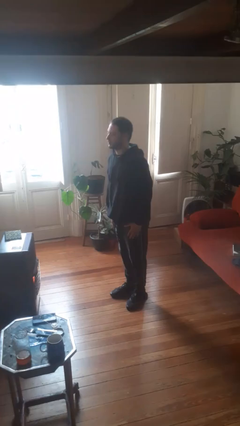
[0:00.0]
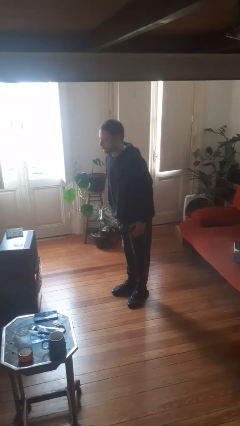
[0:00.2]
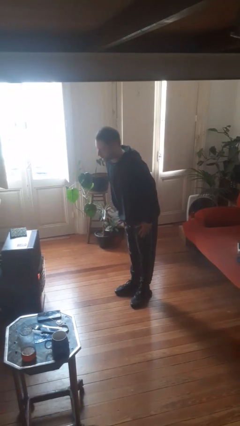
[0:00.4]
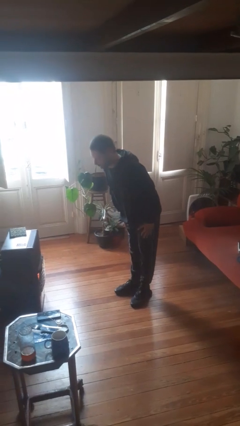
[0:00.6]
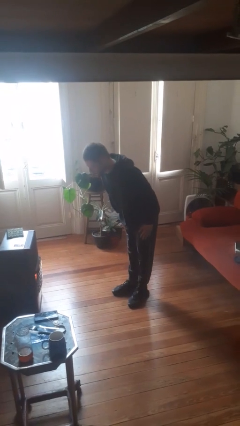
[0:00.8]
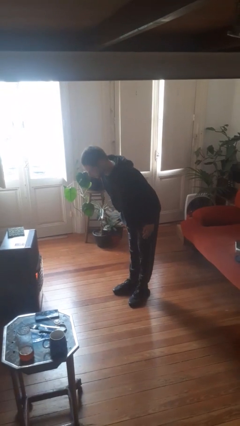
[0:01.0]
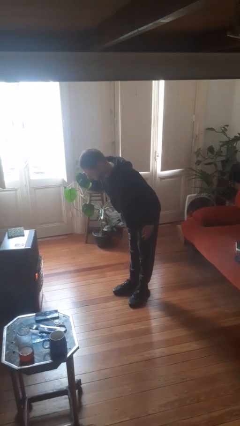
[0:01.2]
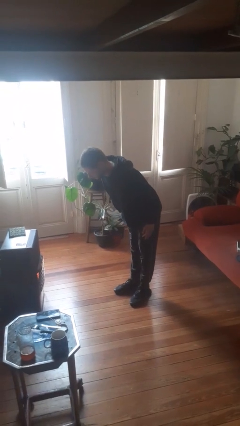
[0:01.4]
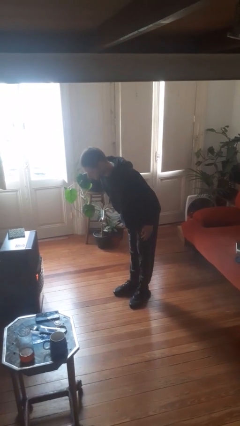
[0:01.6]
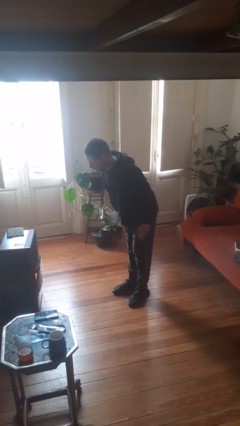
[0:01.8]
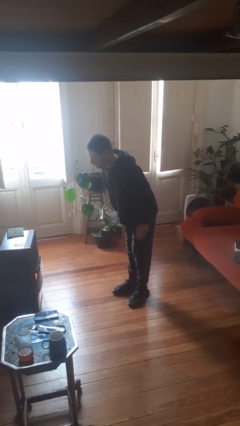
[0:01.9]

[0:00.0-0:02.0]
person bows

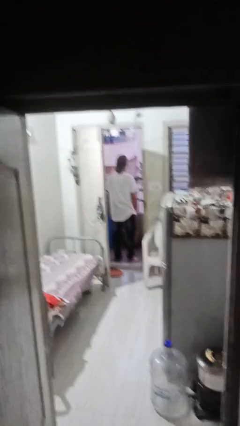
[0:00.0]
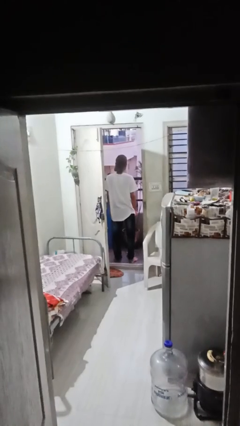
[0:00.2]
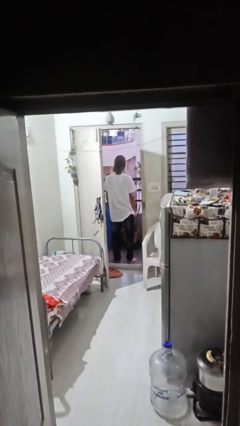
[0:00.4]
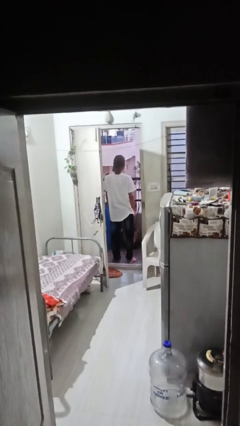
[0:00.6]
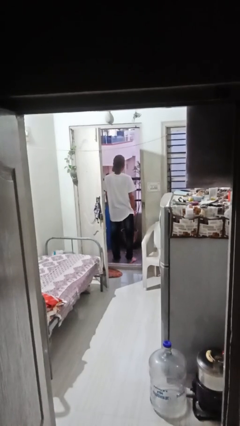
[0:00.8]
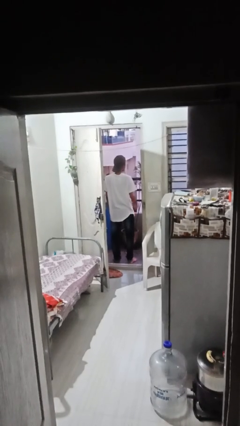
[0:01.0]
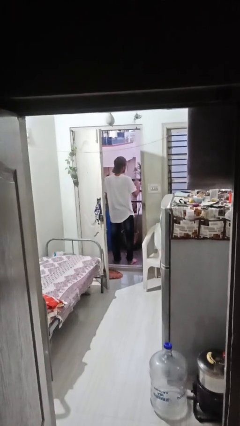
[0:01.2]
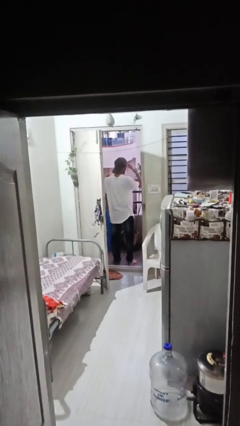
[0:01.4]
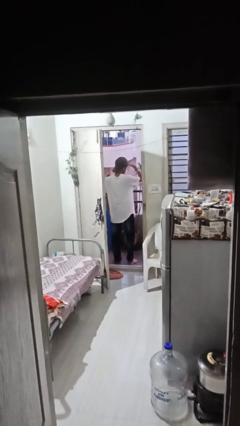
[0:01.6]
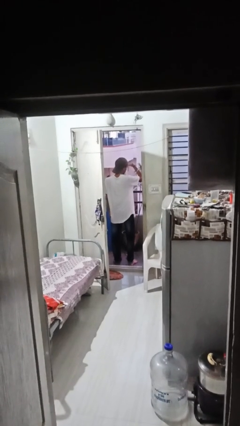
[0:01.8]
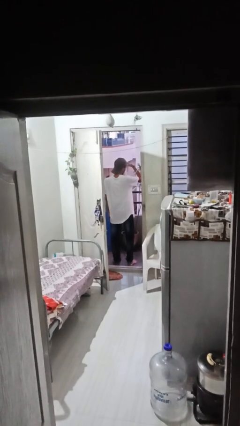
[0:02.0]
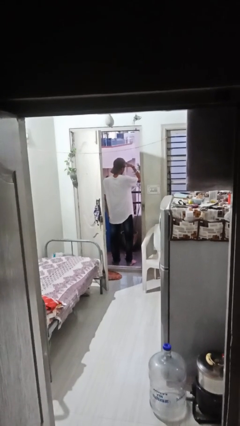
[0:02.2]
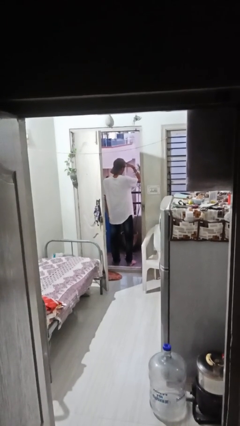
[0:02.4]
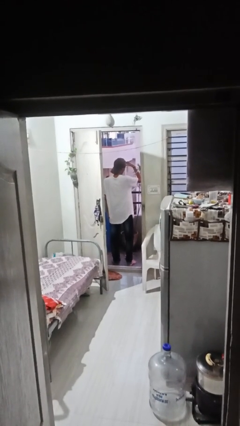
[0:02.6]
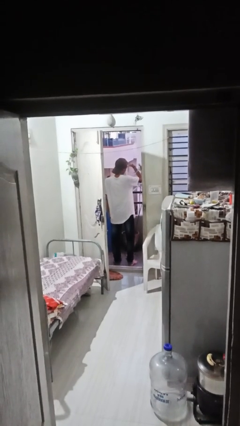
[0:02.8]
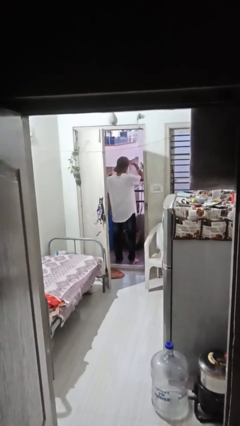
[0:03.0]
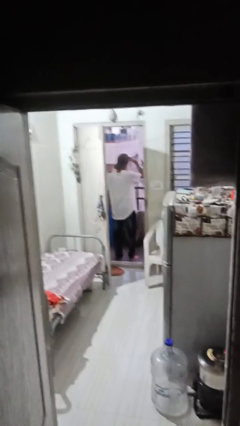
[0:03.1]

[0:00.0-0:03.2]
person shades eyes

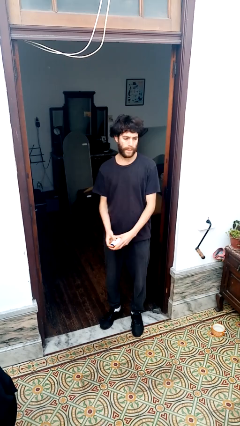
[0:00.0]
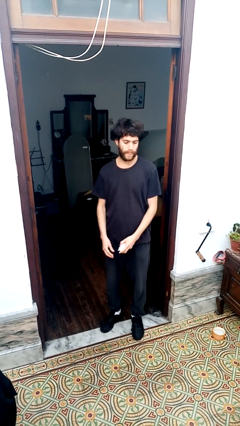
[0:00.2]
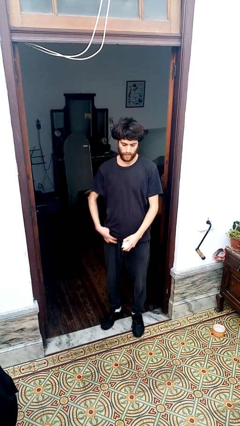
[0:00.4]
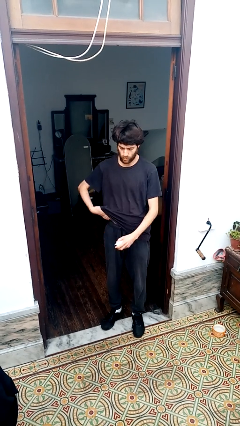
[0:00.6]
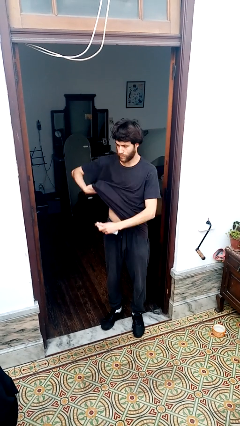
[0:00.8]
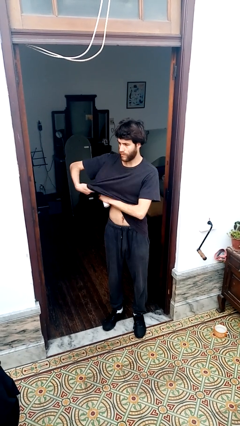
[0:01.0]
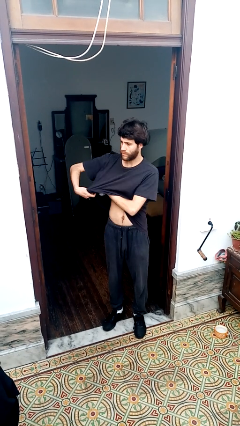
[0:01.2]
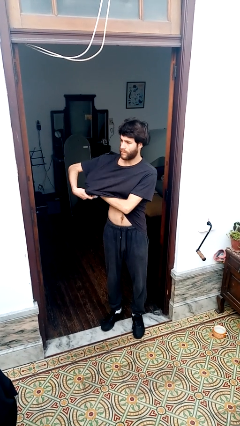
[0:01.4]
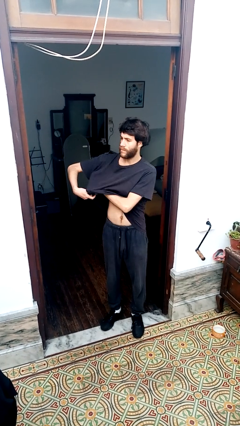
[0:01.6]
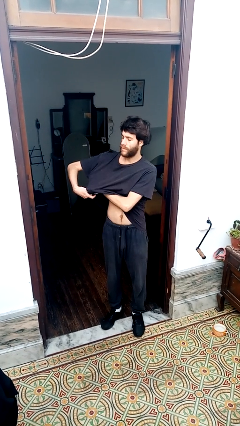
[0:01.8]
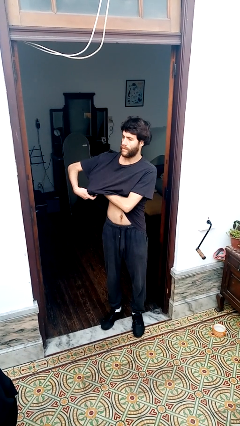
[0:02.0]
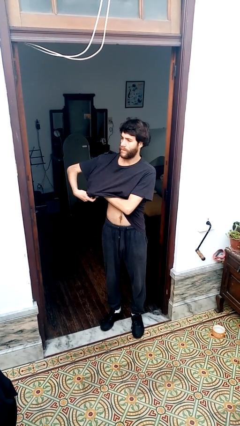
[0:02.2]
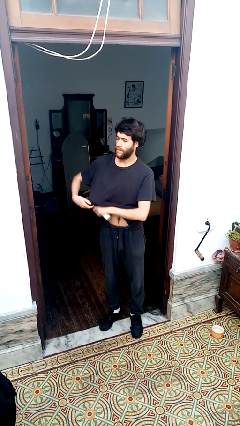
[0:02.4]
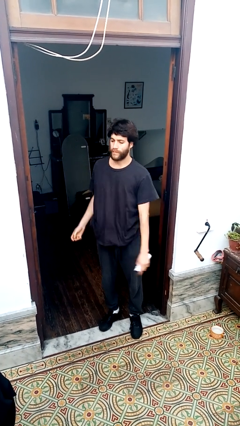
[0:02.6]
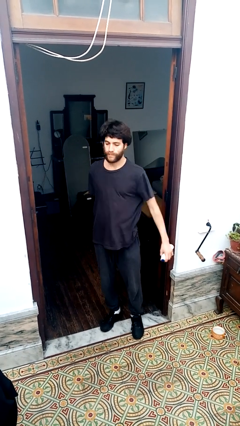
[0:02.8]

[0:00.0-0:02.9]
person applies deodorant

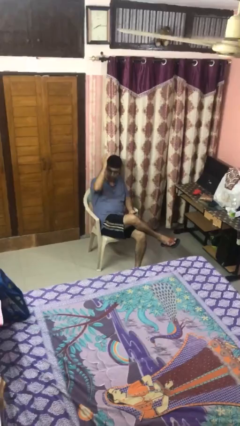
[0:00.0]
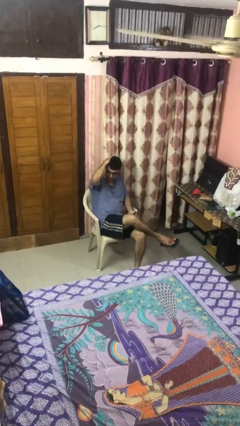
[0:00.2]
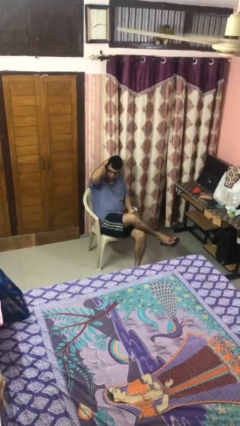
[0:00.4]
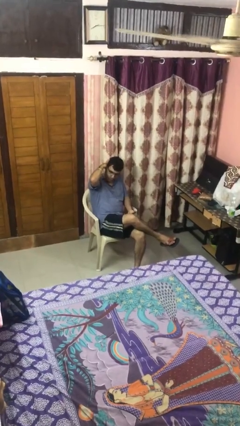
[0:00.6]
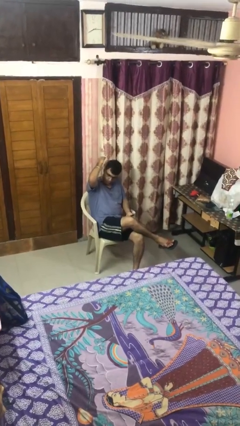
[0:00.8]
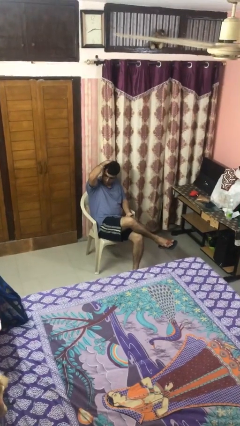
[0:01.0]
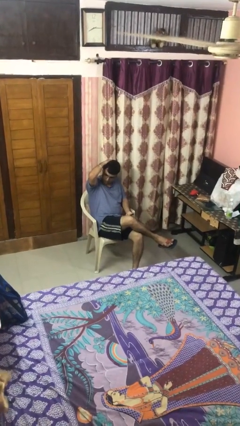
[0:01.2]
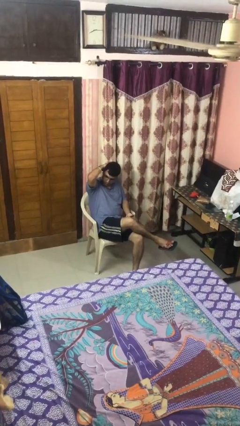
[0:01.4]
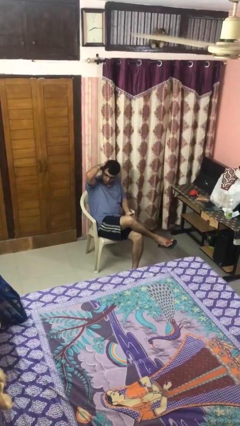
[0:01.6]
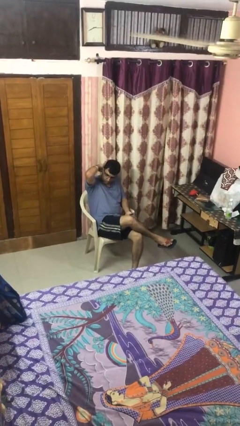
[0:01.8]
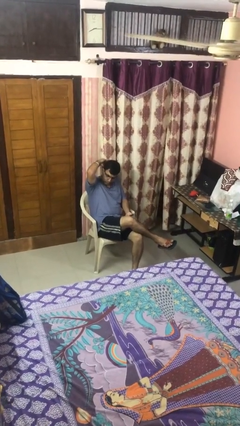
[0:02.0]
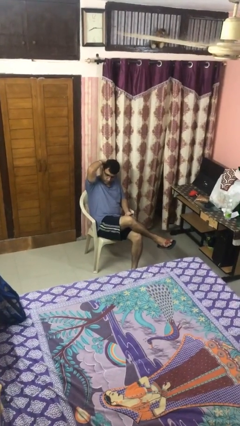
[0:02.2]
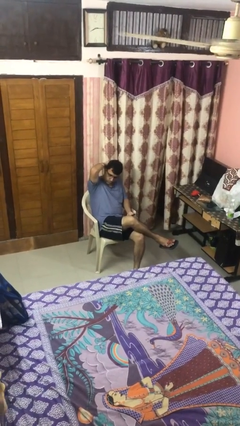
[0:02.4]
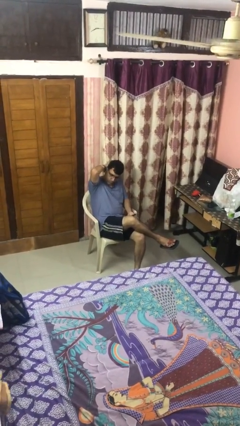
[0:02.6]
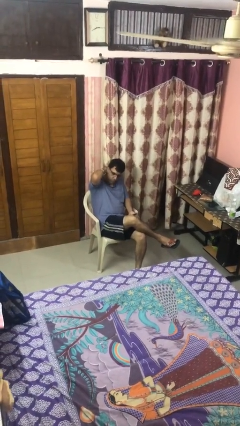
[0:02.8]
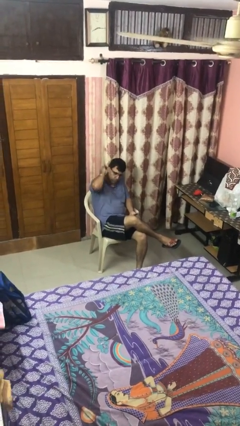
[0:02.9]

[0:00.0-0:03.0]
person strokes hair

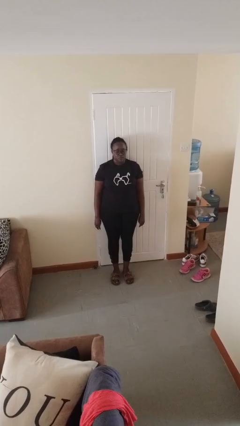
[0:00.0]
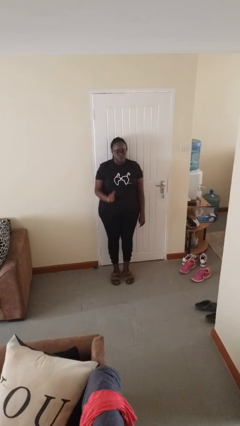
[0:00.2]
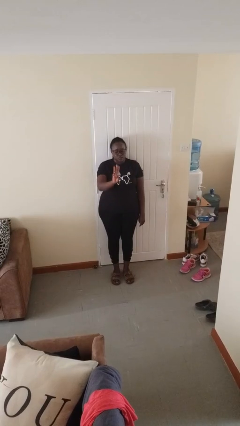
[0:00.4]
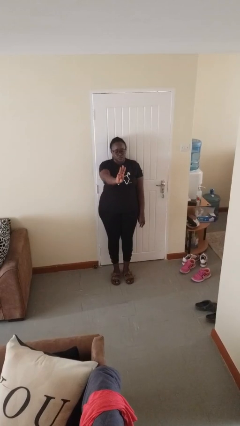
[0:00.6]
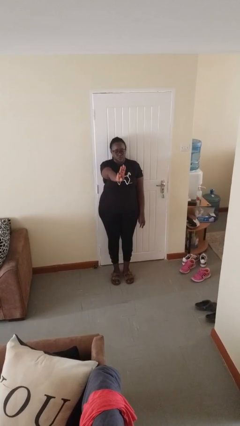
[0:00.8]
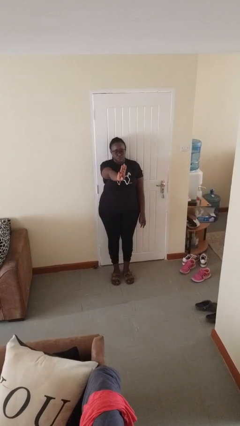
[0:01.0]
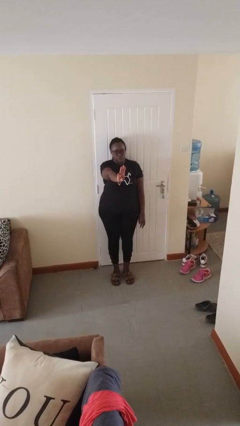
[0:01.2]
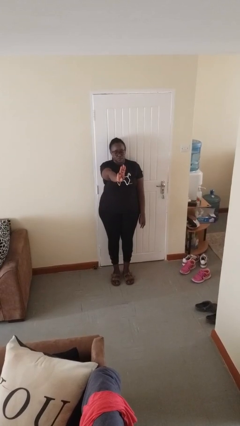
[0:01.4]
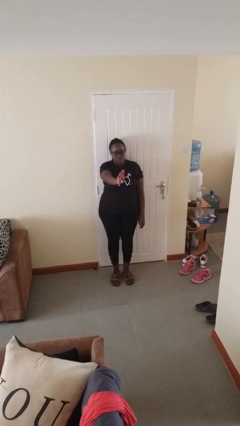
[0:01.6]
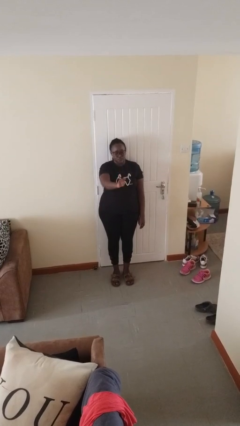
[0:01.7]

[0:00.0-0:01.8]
person gestures number three

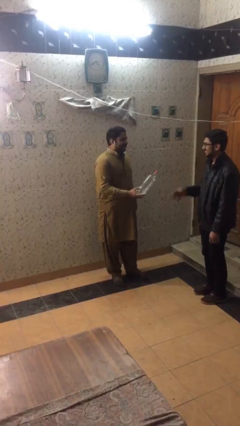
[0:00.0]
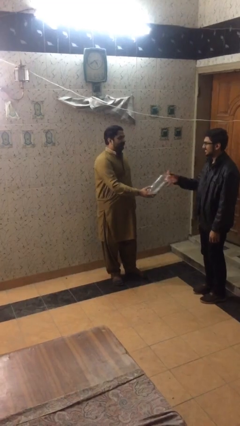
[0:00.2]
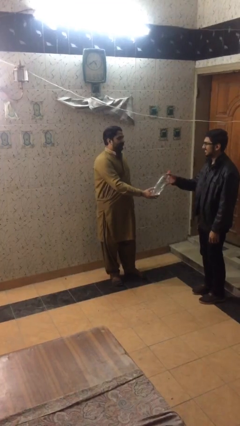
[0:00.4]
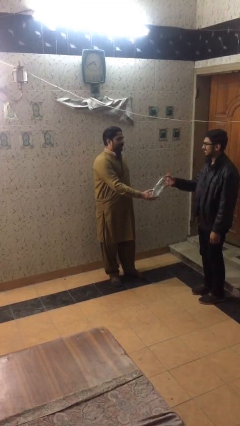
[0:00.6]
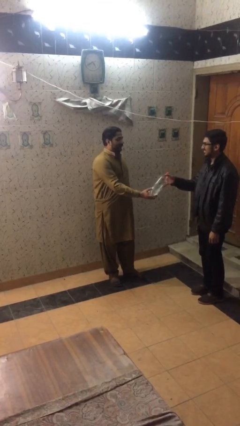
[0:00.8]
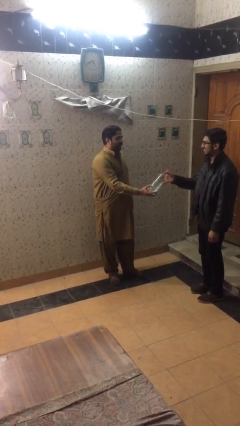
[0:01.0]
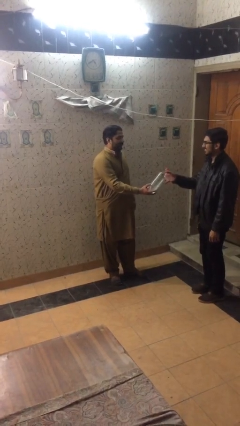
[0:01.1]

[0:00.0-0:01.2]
person transfers object to person

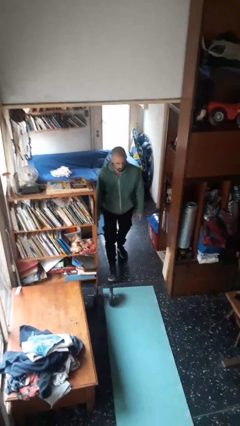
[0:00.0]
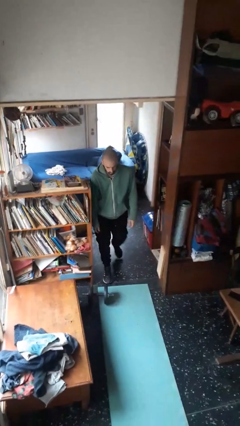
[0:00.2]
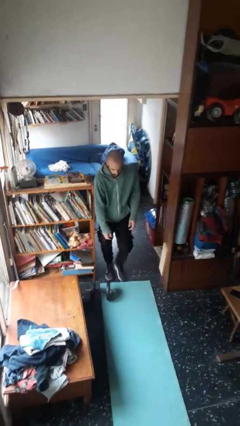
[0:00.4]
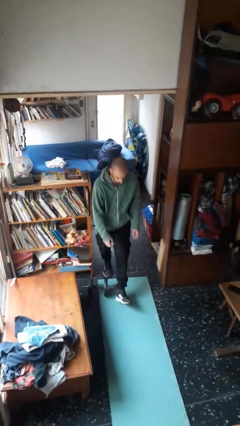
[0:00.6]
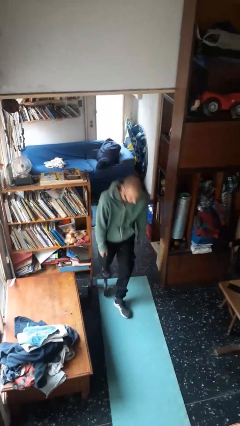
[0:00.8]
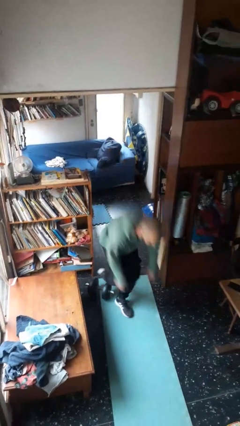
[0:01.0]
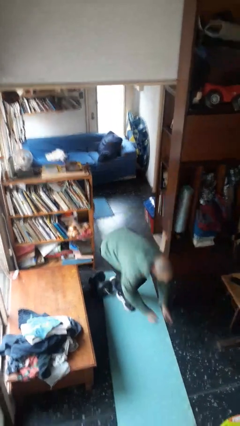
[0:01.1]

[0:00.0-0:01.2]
person trips on object on floor

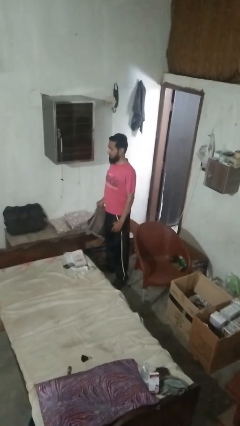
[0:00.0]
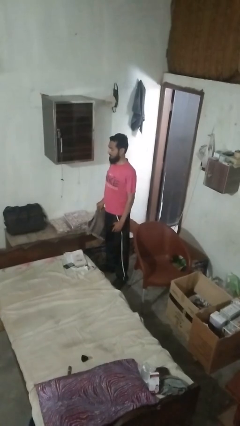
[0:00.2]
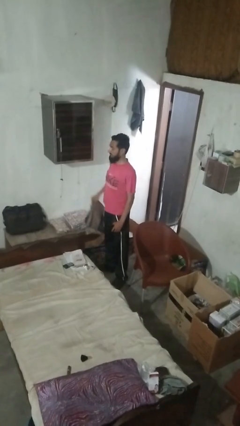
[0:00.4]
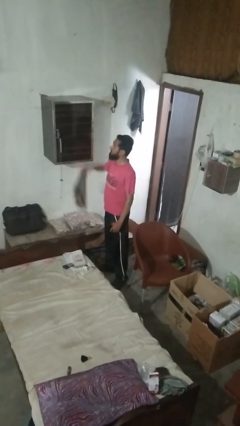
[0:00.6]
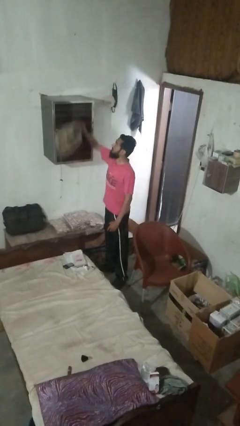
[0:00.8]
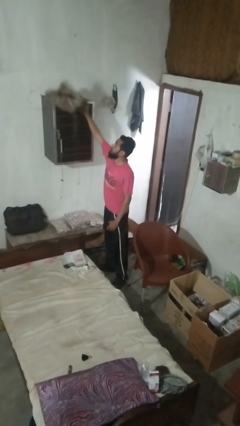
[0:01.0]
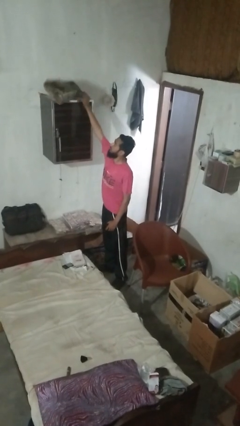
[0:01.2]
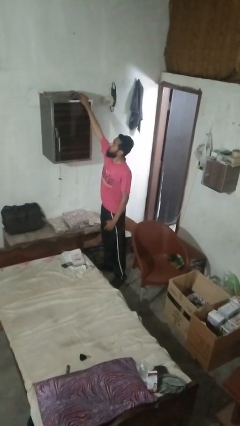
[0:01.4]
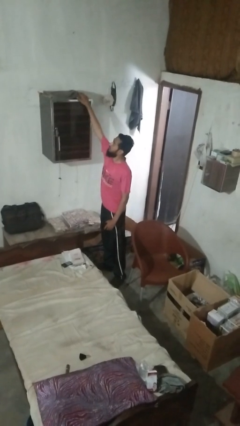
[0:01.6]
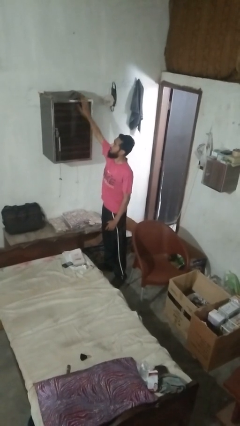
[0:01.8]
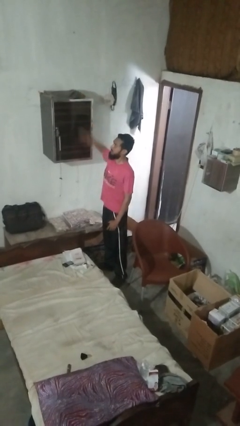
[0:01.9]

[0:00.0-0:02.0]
person puts down object on shelf
